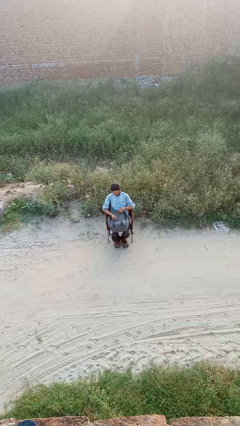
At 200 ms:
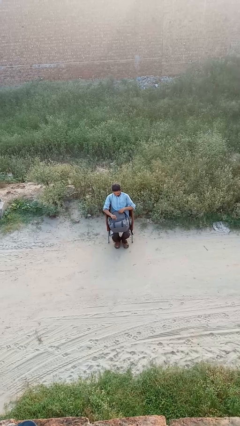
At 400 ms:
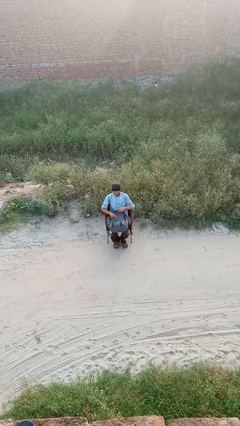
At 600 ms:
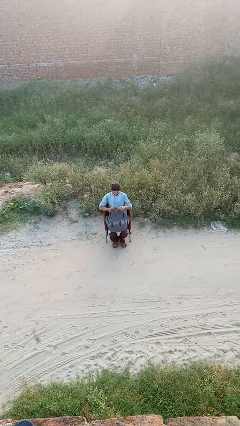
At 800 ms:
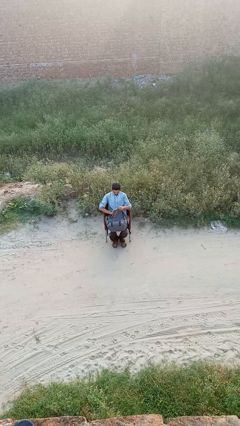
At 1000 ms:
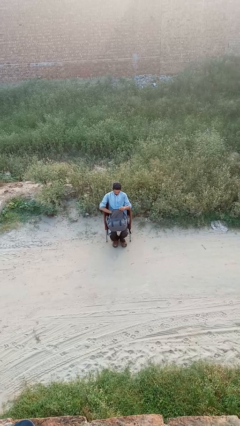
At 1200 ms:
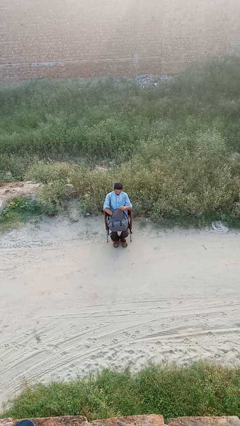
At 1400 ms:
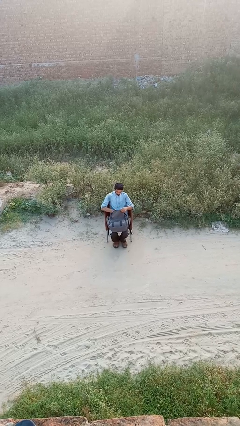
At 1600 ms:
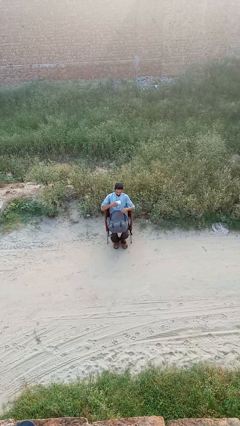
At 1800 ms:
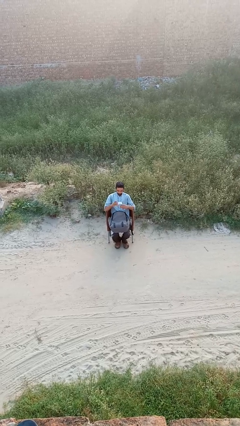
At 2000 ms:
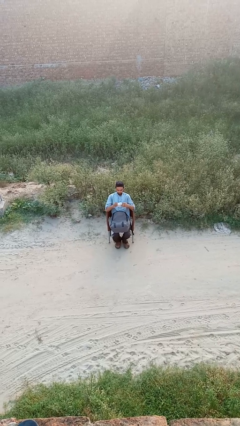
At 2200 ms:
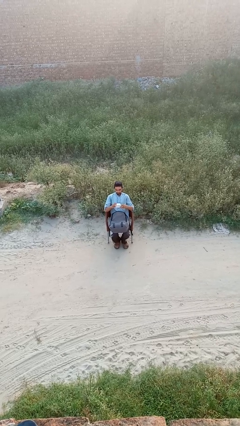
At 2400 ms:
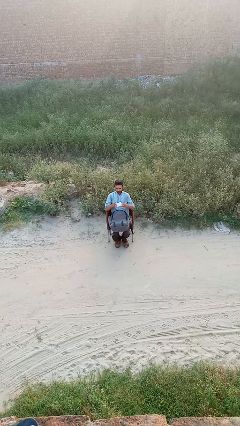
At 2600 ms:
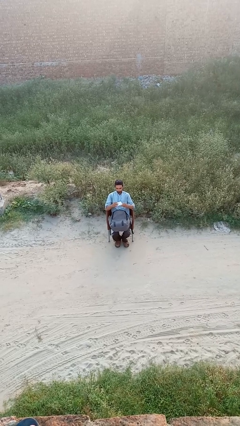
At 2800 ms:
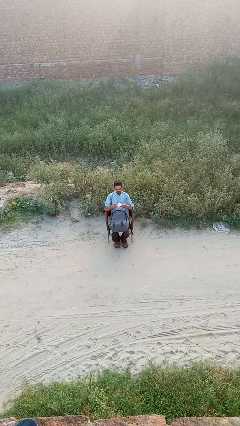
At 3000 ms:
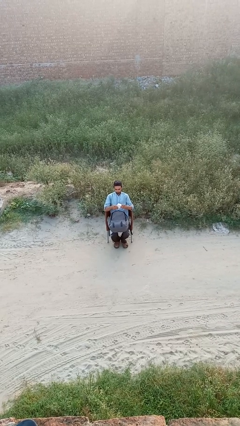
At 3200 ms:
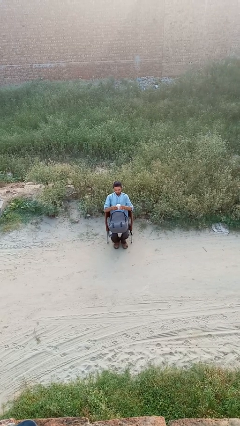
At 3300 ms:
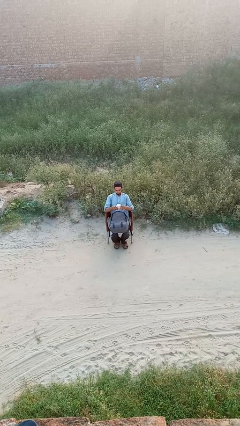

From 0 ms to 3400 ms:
person takes object from backpack

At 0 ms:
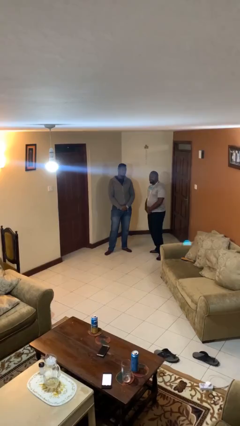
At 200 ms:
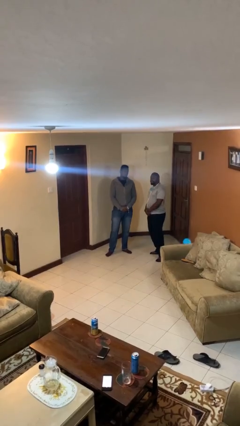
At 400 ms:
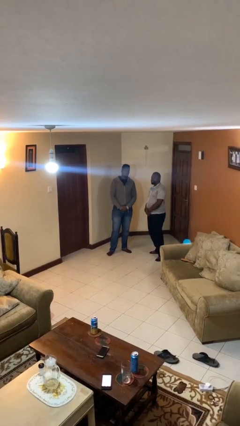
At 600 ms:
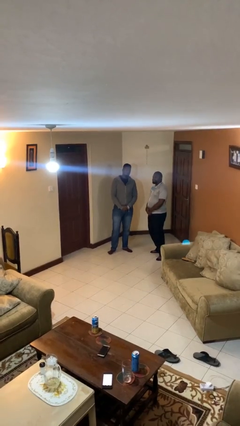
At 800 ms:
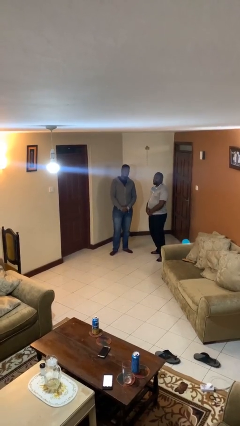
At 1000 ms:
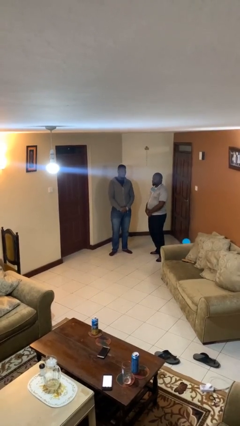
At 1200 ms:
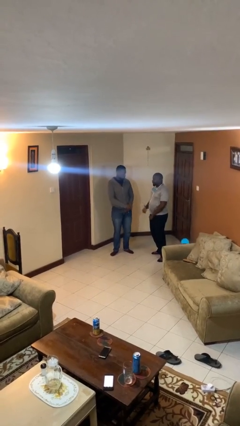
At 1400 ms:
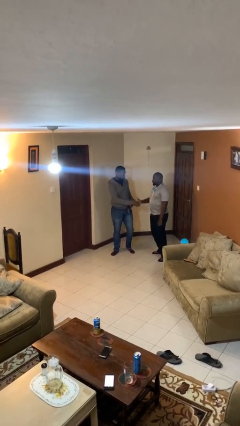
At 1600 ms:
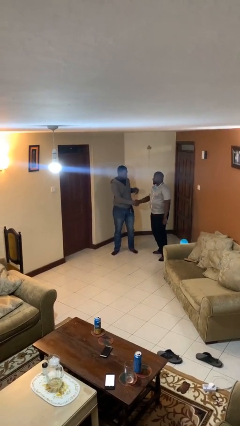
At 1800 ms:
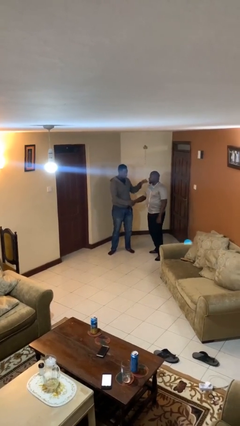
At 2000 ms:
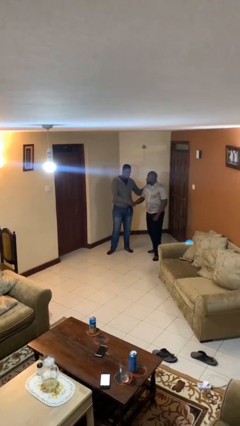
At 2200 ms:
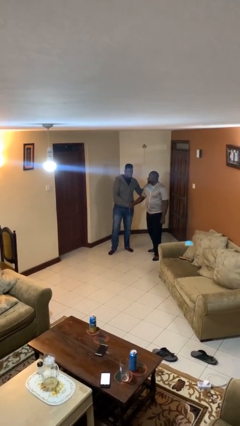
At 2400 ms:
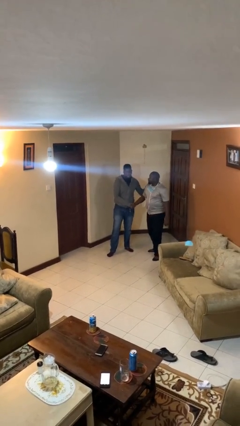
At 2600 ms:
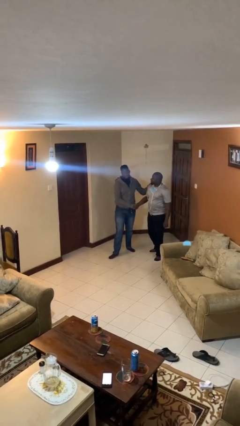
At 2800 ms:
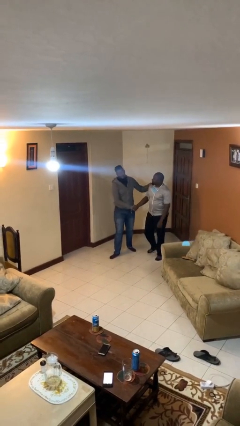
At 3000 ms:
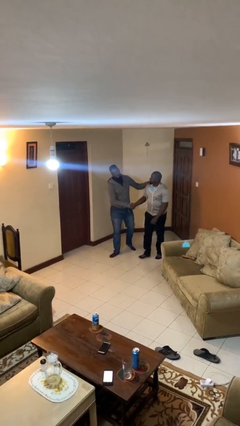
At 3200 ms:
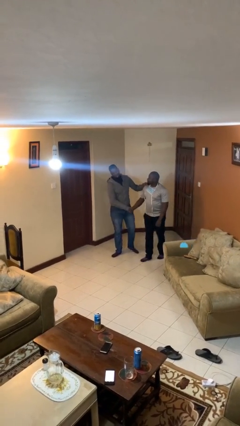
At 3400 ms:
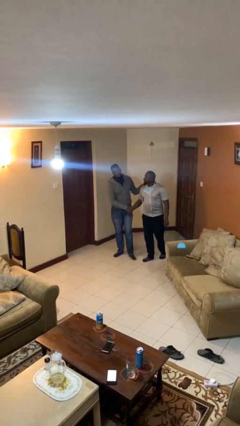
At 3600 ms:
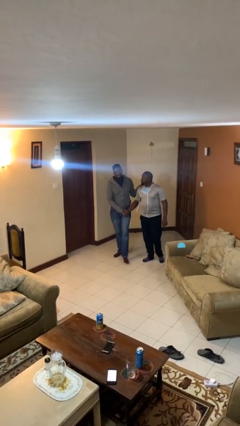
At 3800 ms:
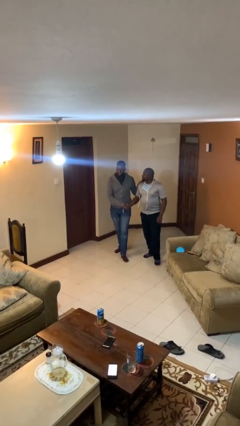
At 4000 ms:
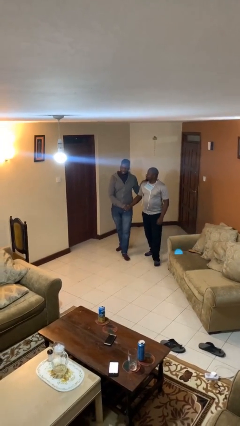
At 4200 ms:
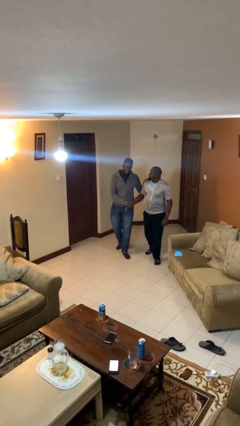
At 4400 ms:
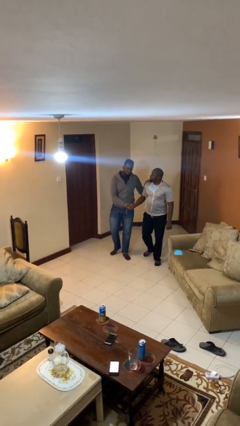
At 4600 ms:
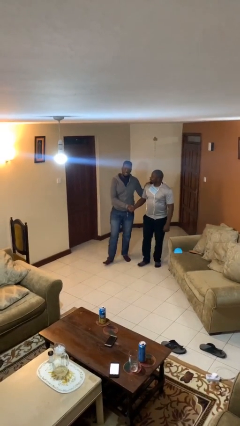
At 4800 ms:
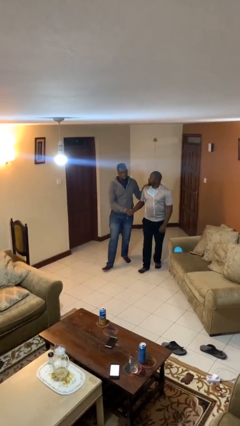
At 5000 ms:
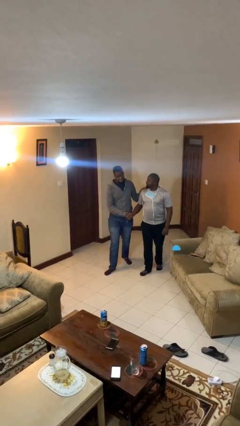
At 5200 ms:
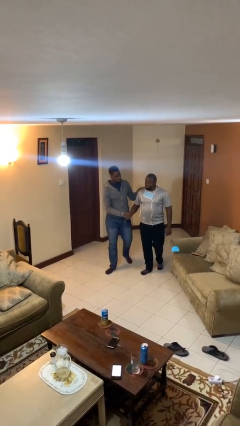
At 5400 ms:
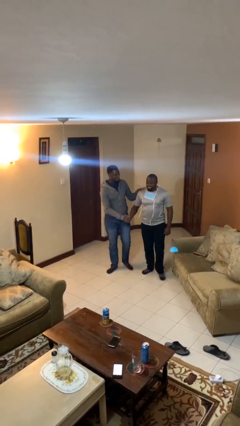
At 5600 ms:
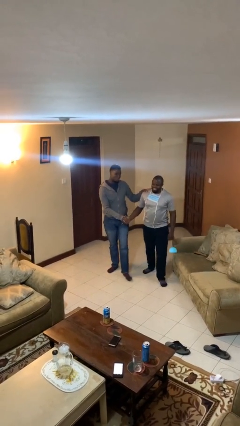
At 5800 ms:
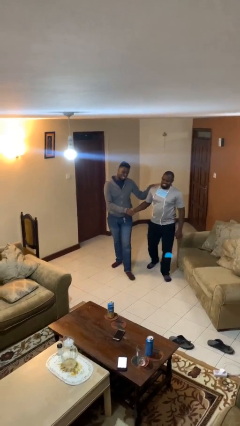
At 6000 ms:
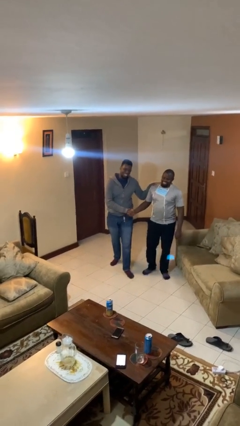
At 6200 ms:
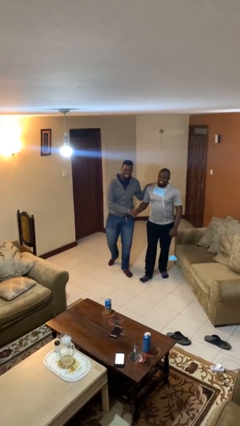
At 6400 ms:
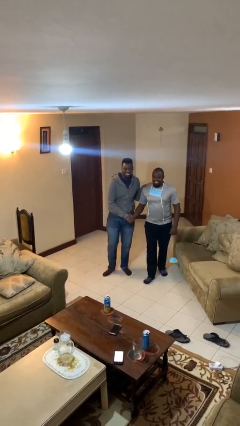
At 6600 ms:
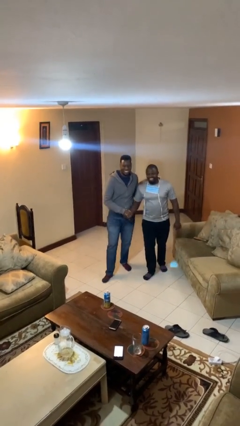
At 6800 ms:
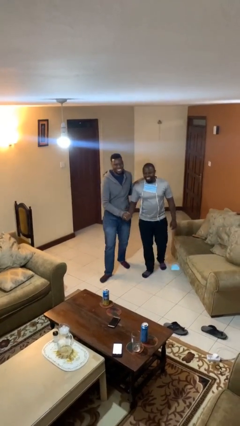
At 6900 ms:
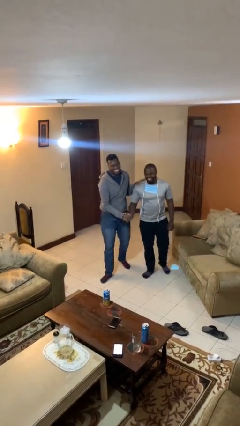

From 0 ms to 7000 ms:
person holds hand

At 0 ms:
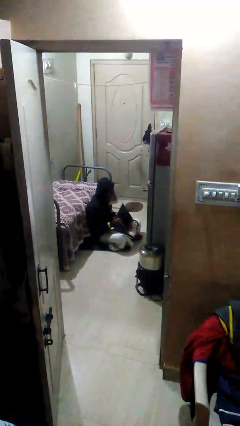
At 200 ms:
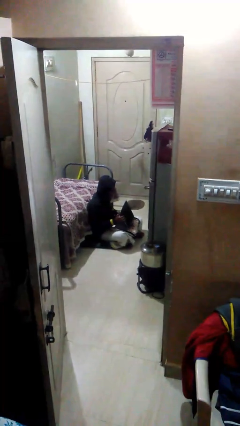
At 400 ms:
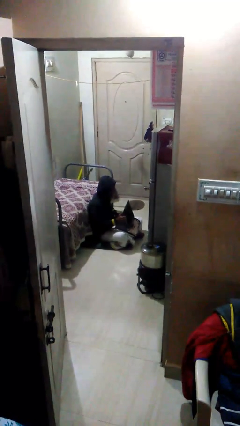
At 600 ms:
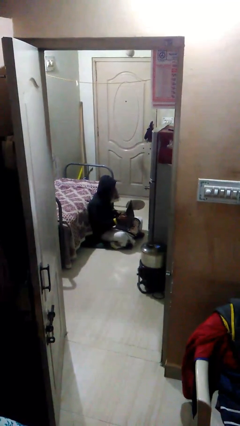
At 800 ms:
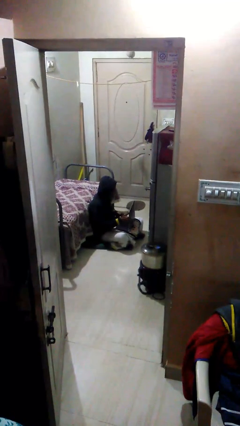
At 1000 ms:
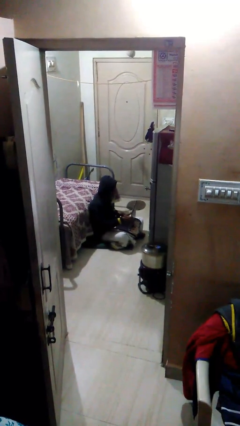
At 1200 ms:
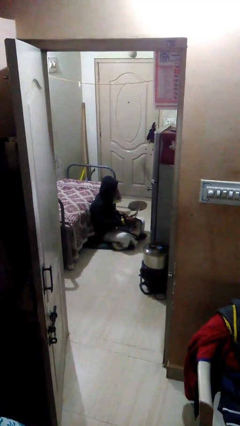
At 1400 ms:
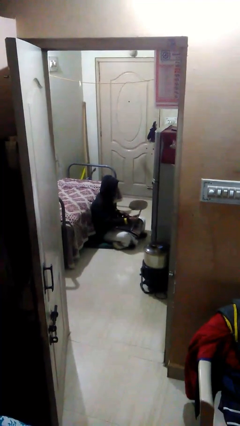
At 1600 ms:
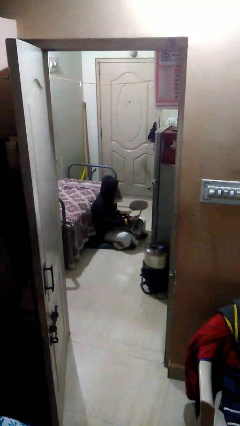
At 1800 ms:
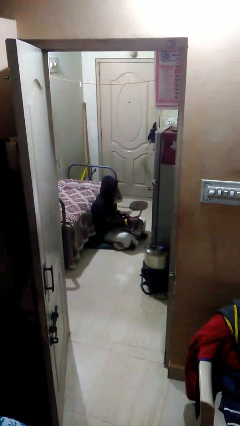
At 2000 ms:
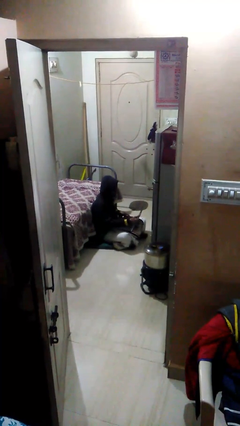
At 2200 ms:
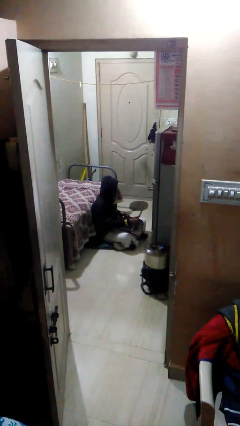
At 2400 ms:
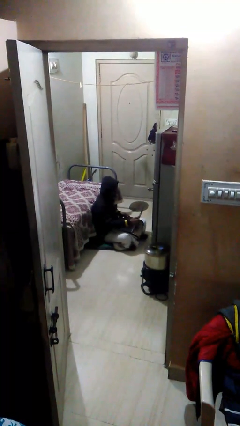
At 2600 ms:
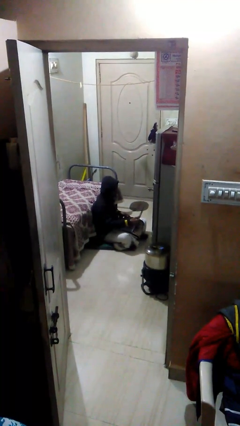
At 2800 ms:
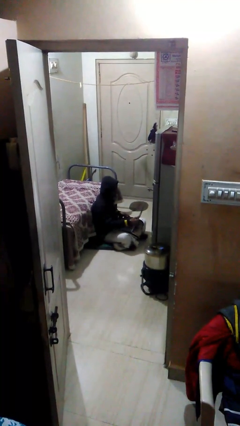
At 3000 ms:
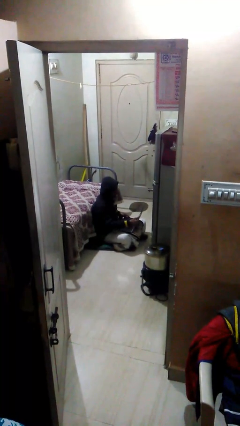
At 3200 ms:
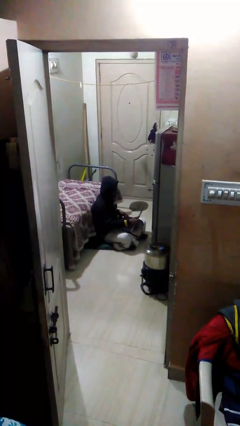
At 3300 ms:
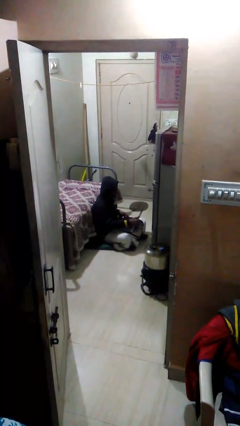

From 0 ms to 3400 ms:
person interacts with laptop

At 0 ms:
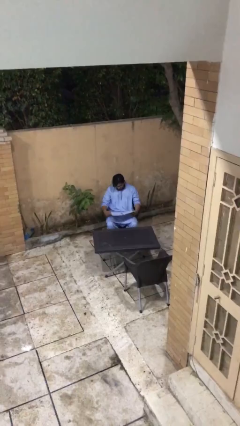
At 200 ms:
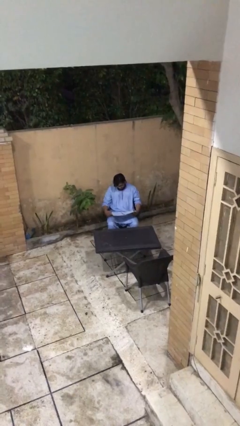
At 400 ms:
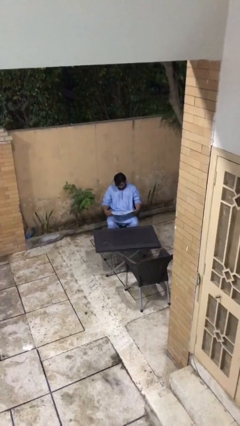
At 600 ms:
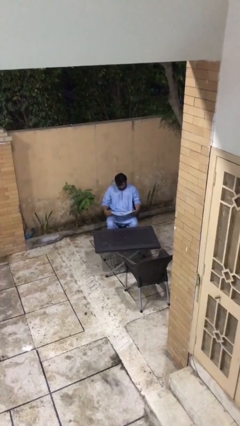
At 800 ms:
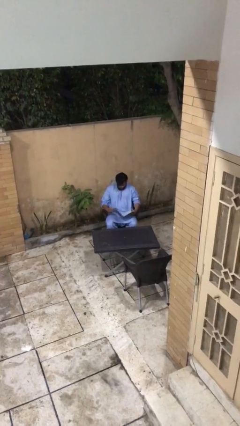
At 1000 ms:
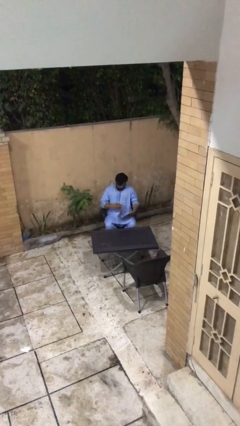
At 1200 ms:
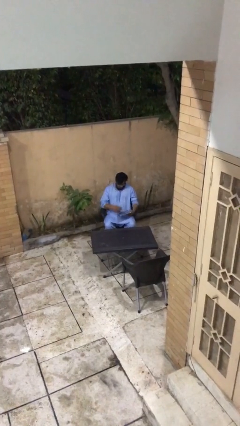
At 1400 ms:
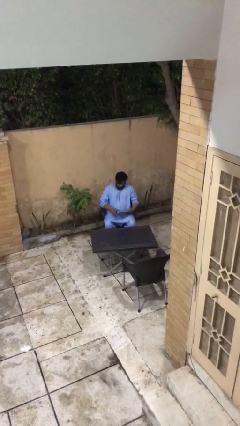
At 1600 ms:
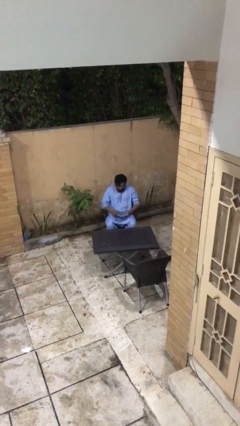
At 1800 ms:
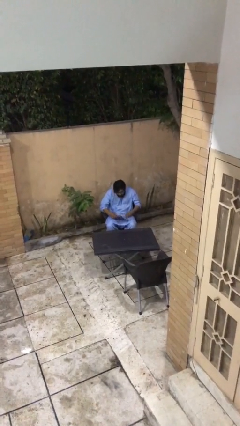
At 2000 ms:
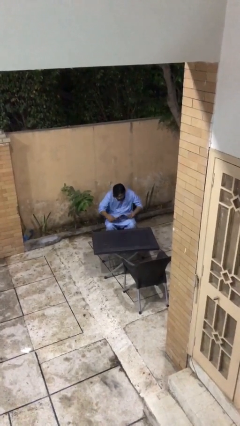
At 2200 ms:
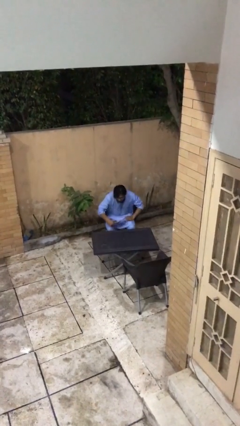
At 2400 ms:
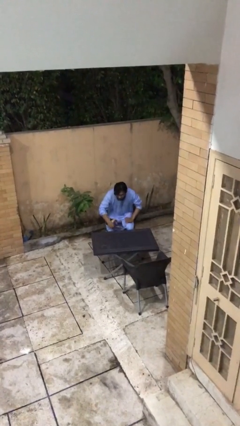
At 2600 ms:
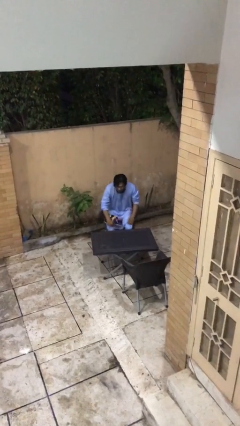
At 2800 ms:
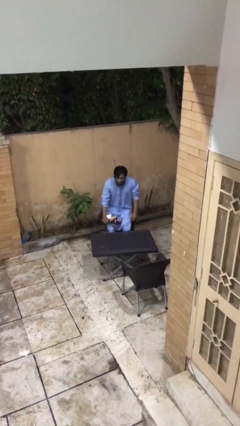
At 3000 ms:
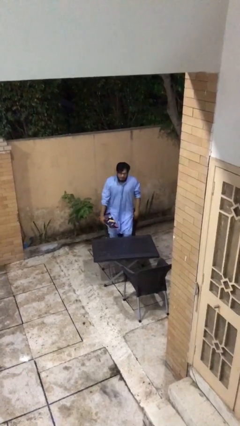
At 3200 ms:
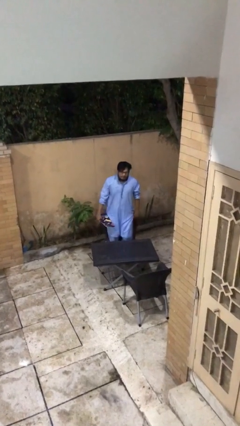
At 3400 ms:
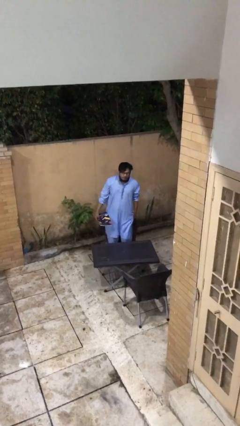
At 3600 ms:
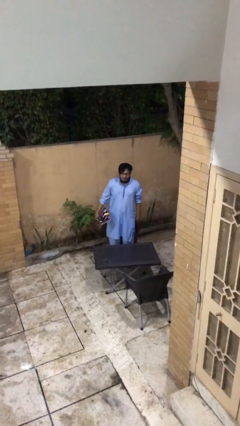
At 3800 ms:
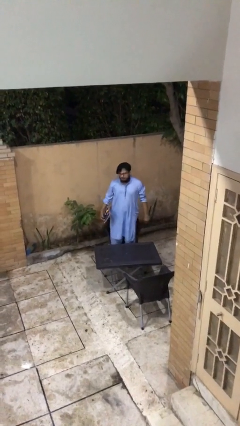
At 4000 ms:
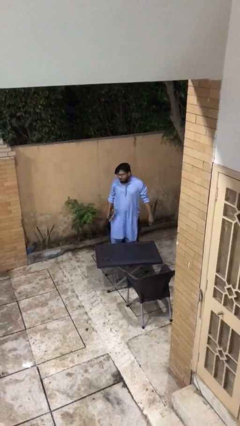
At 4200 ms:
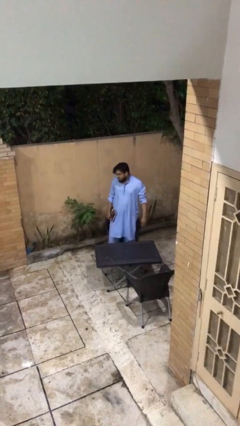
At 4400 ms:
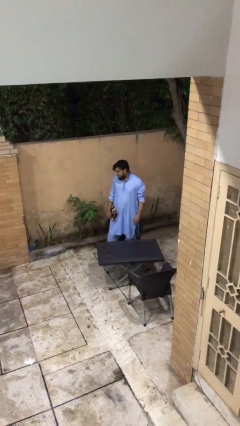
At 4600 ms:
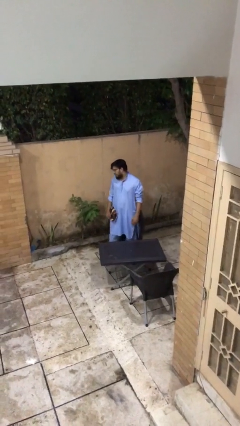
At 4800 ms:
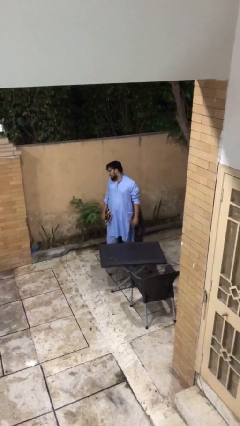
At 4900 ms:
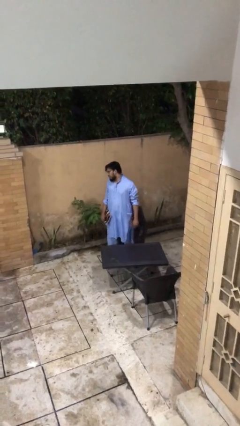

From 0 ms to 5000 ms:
person stands up
